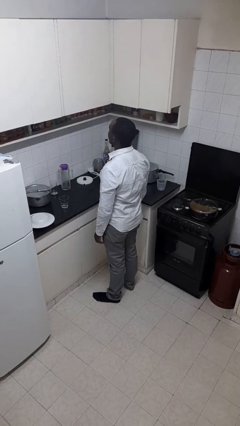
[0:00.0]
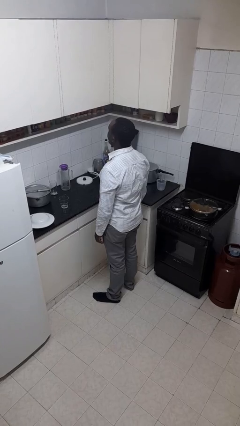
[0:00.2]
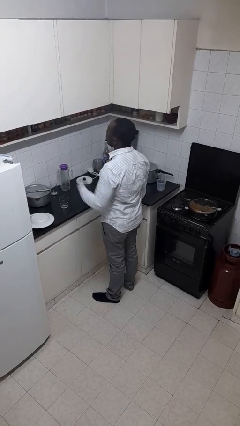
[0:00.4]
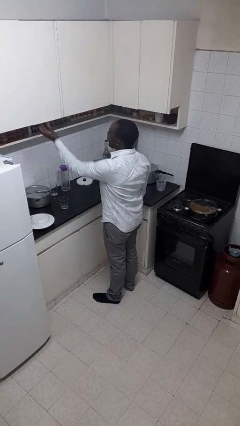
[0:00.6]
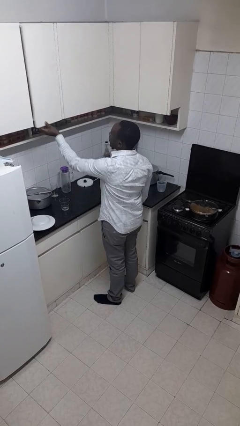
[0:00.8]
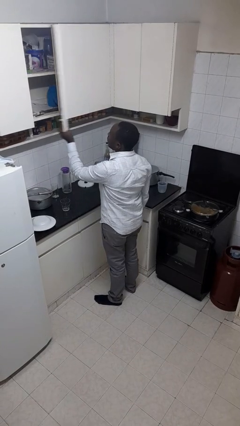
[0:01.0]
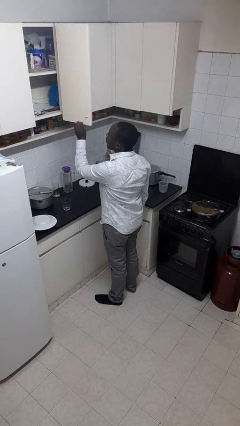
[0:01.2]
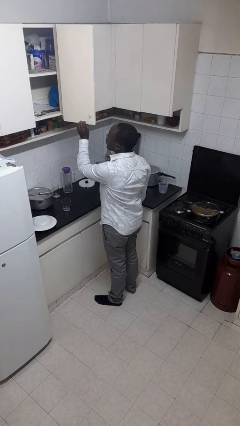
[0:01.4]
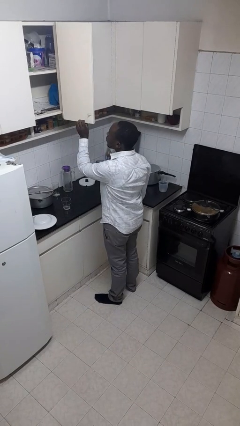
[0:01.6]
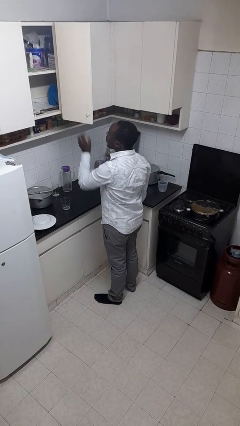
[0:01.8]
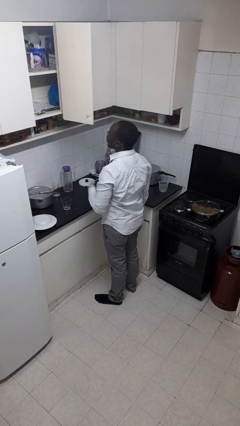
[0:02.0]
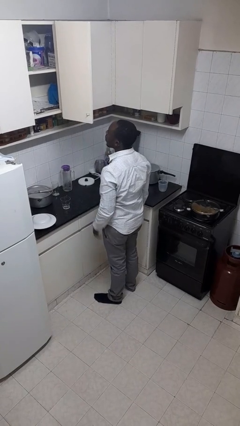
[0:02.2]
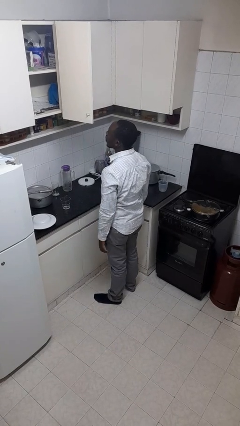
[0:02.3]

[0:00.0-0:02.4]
person opens cabinet

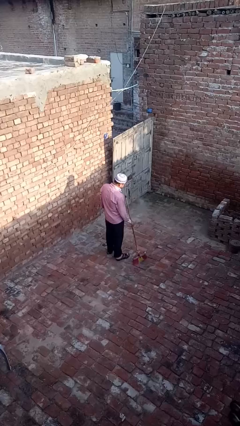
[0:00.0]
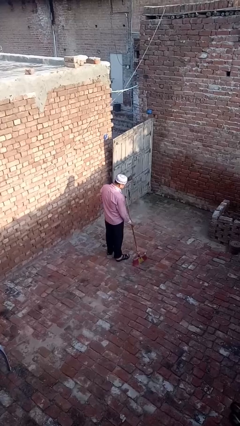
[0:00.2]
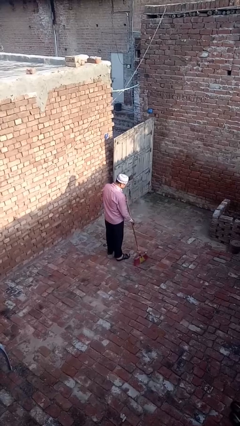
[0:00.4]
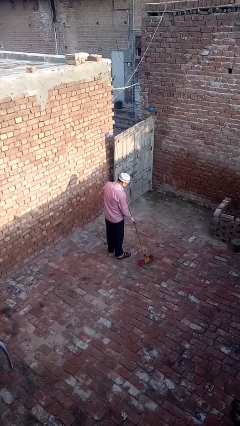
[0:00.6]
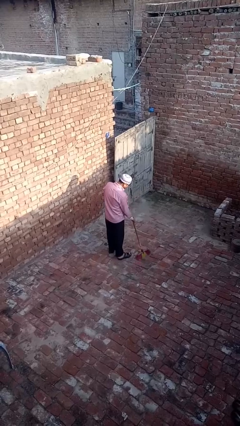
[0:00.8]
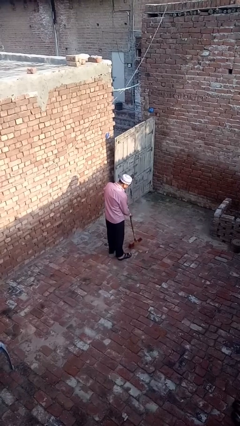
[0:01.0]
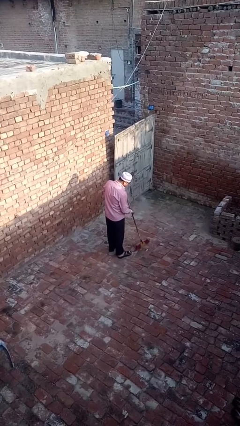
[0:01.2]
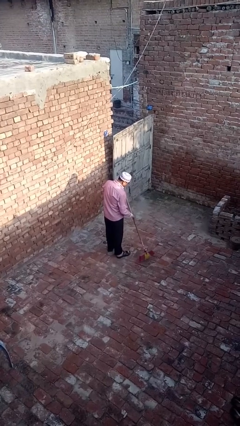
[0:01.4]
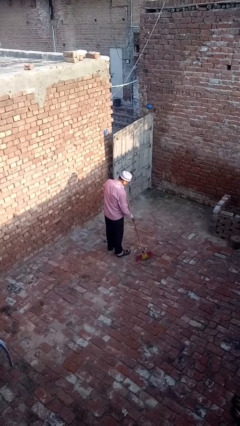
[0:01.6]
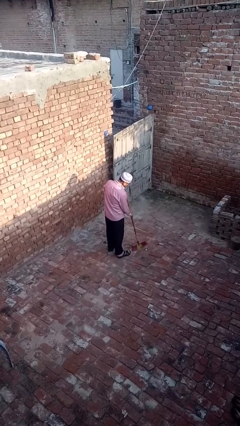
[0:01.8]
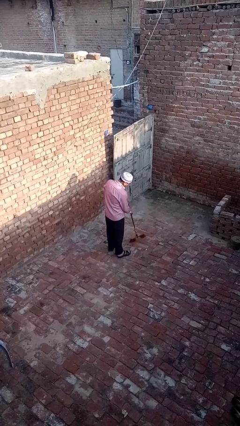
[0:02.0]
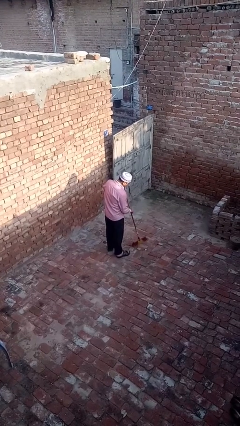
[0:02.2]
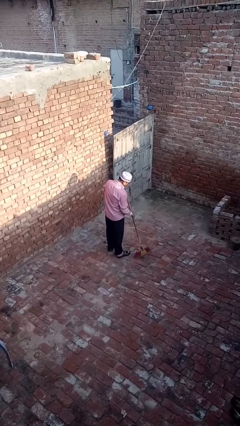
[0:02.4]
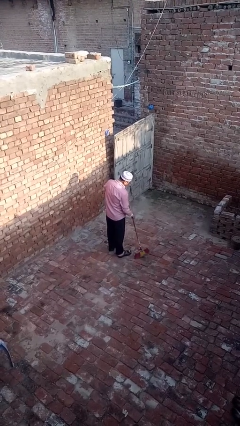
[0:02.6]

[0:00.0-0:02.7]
person sweeps floor

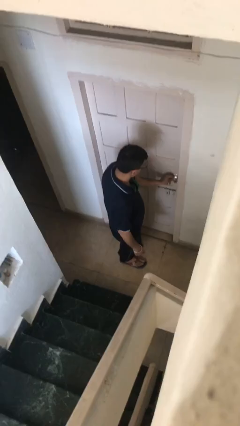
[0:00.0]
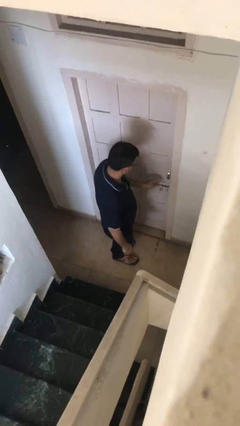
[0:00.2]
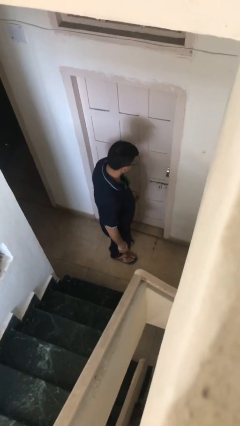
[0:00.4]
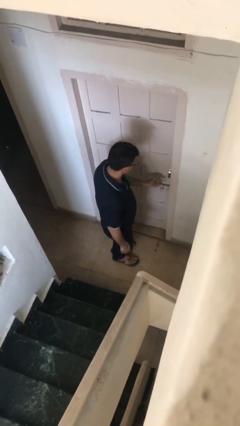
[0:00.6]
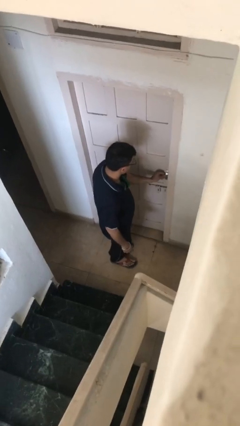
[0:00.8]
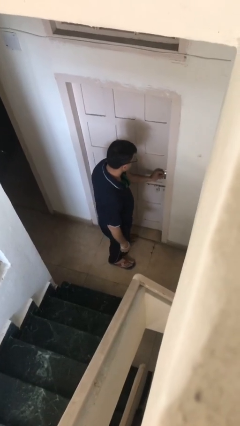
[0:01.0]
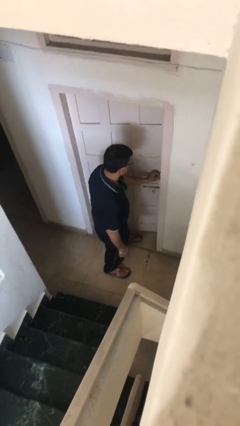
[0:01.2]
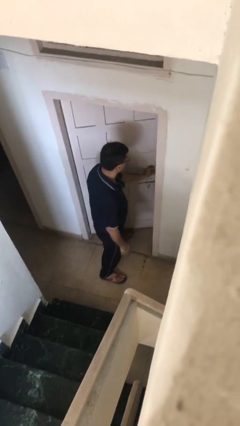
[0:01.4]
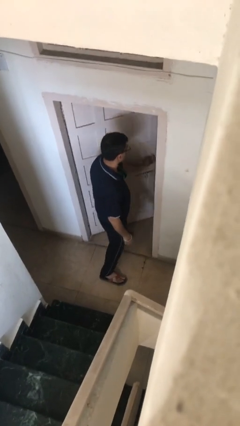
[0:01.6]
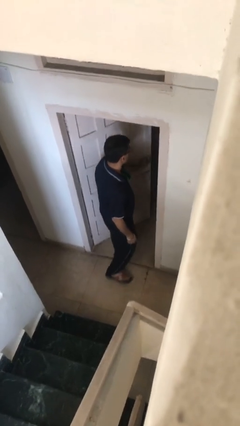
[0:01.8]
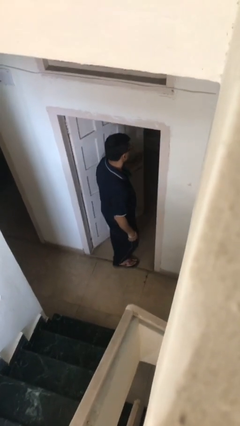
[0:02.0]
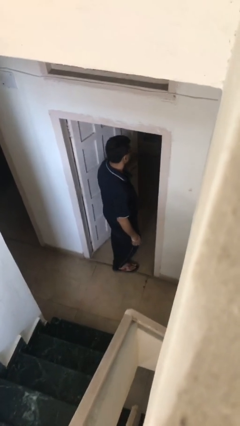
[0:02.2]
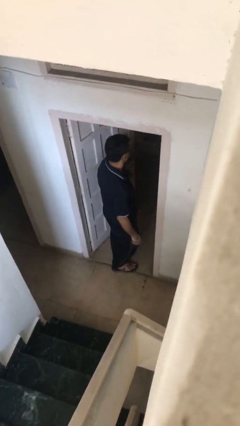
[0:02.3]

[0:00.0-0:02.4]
person opens facility door

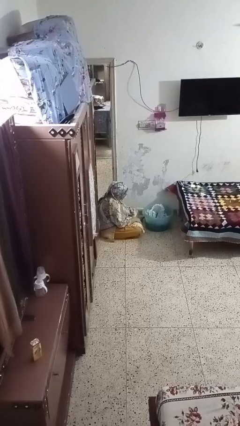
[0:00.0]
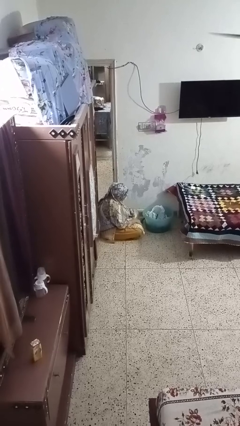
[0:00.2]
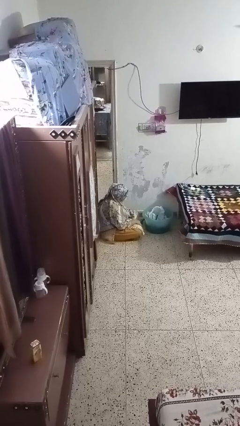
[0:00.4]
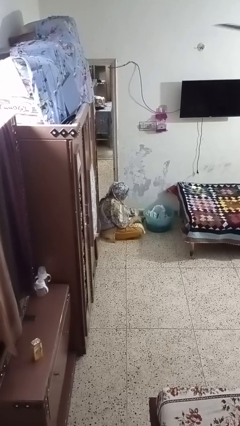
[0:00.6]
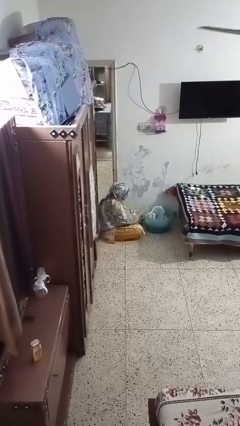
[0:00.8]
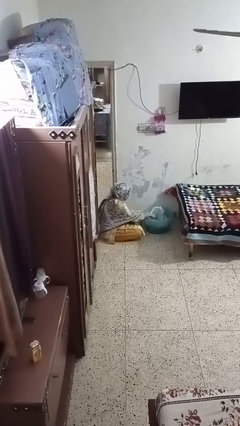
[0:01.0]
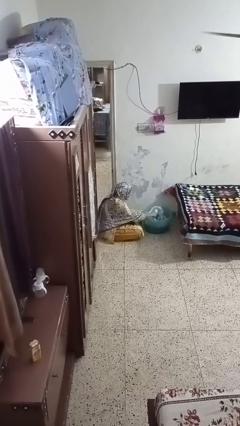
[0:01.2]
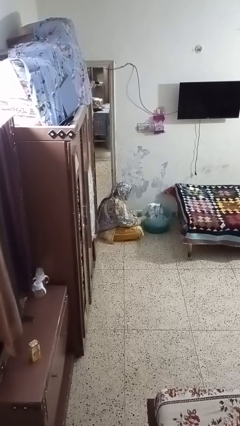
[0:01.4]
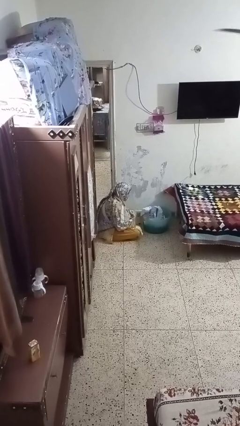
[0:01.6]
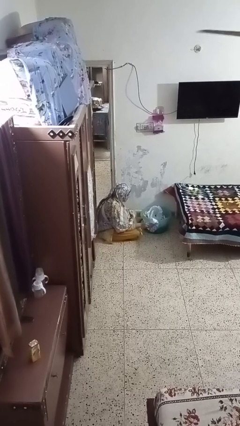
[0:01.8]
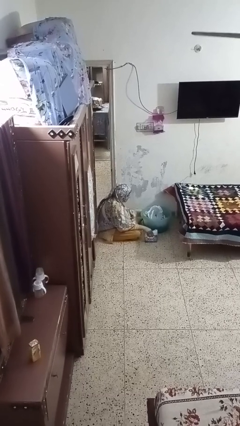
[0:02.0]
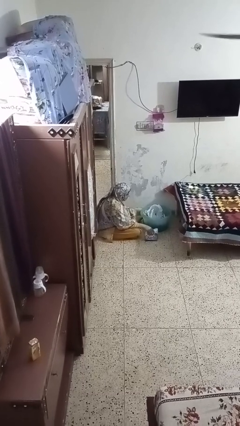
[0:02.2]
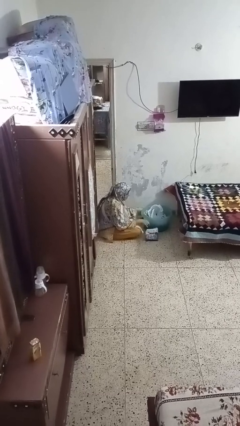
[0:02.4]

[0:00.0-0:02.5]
person takes object from basket

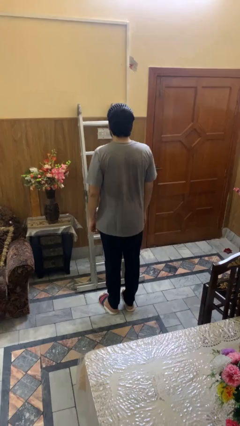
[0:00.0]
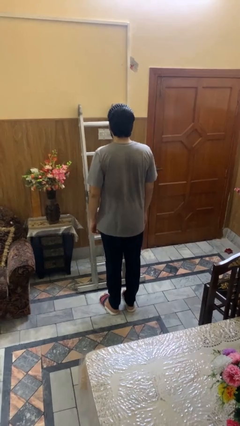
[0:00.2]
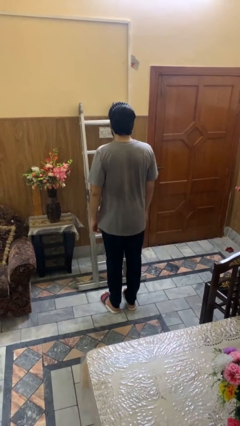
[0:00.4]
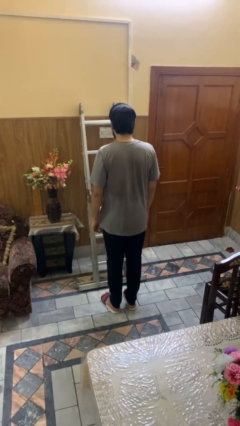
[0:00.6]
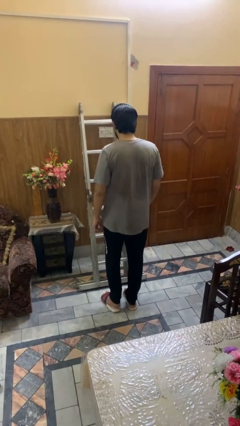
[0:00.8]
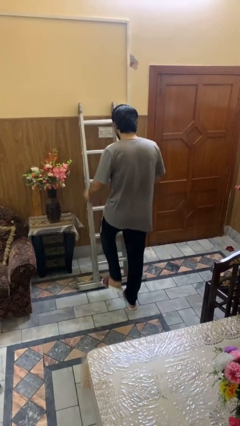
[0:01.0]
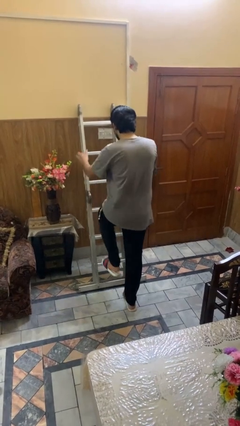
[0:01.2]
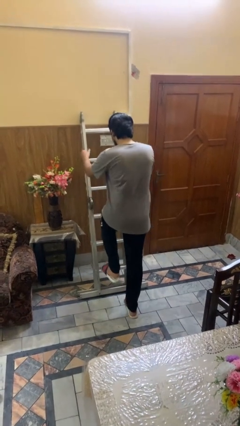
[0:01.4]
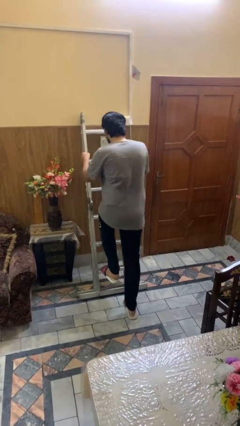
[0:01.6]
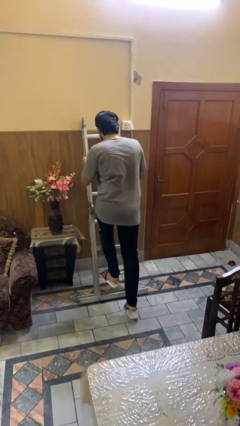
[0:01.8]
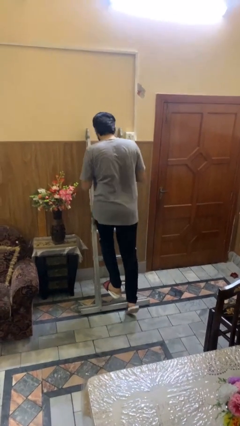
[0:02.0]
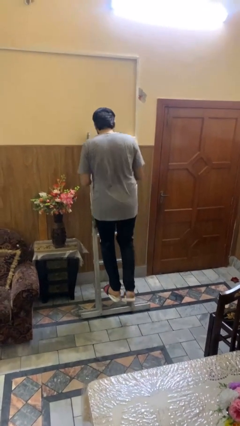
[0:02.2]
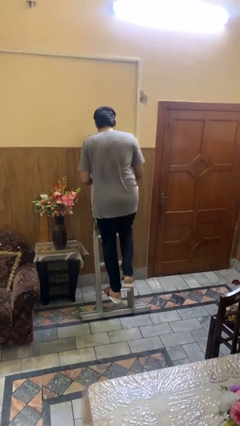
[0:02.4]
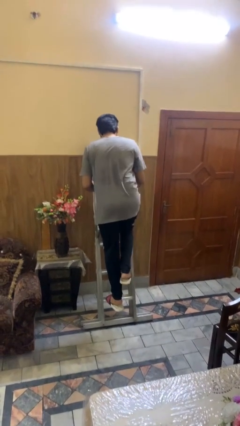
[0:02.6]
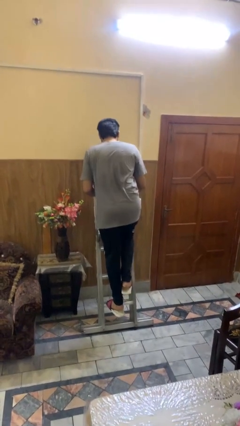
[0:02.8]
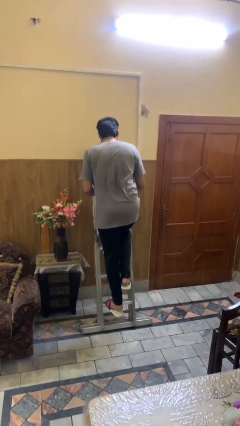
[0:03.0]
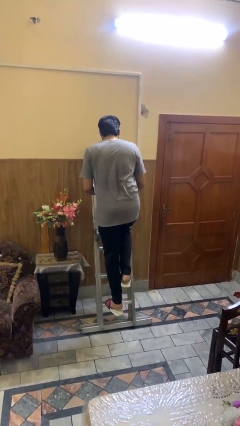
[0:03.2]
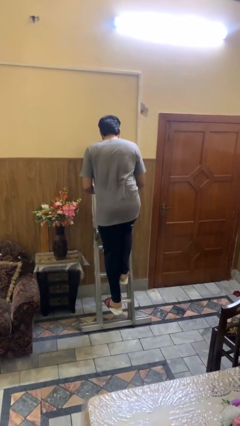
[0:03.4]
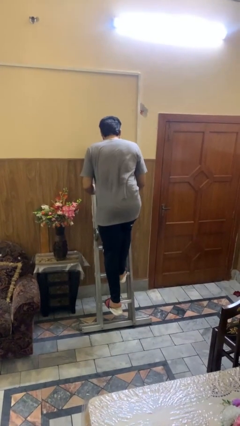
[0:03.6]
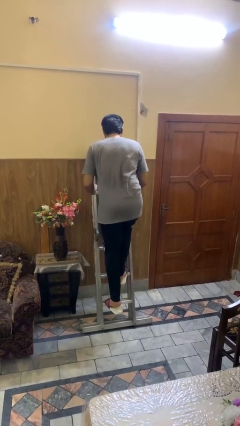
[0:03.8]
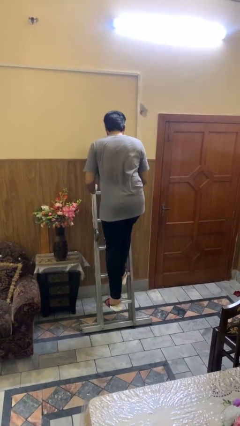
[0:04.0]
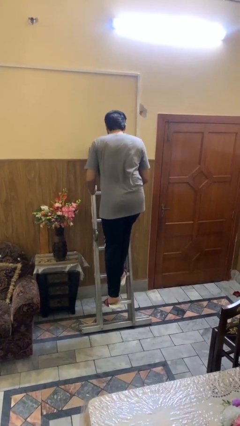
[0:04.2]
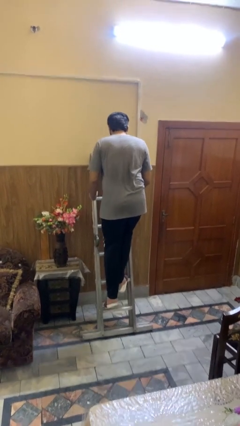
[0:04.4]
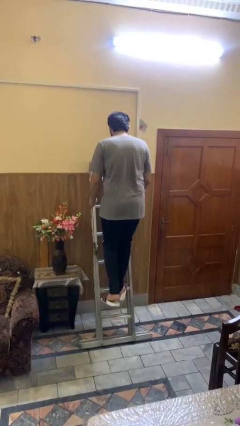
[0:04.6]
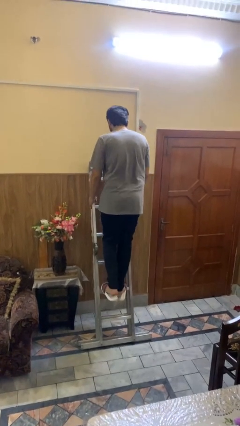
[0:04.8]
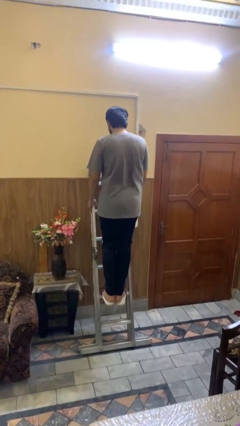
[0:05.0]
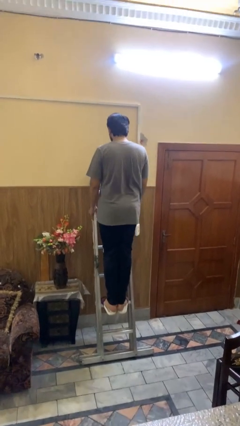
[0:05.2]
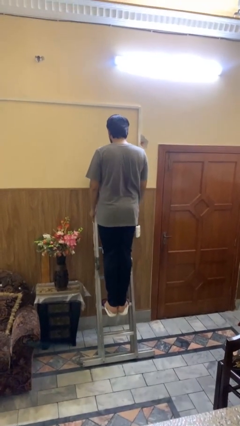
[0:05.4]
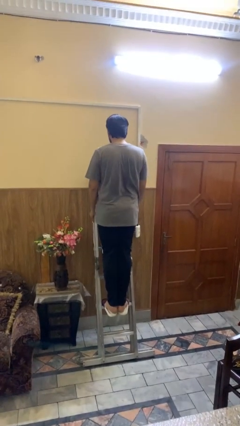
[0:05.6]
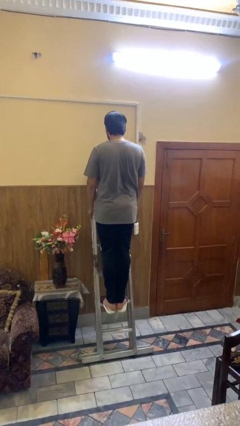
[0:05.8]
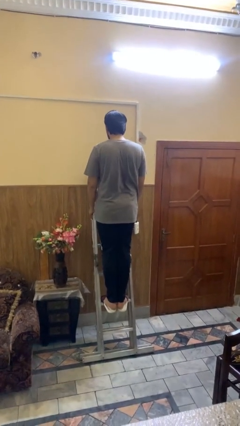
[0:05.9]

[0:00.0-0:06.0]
person climbs up ladder

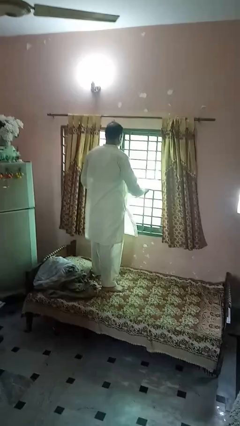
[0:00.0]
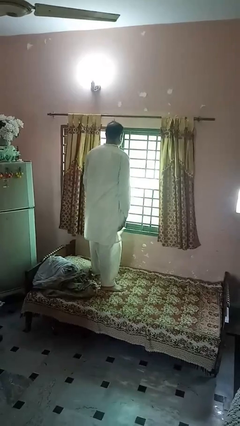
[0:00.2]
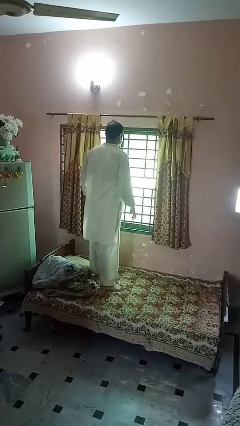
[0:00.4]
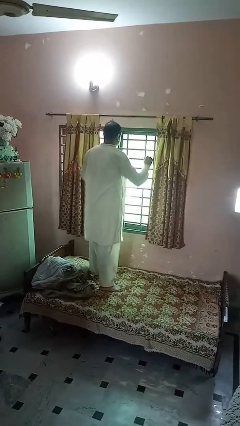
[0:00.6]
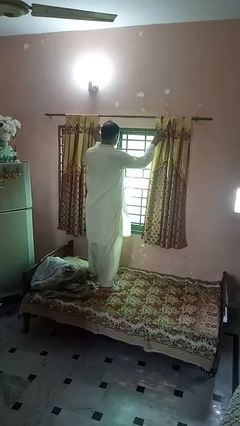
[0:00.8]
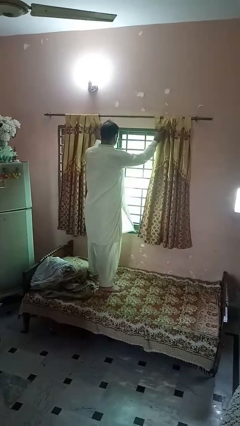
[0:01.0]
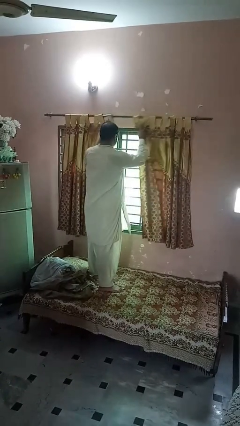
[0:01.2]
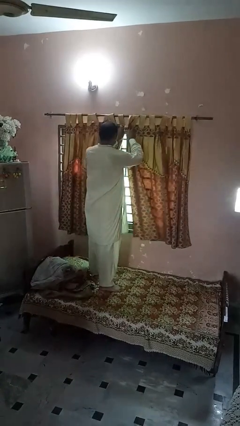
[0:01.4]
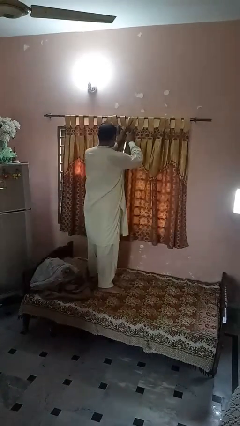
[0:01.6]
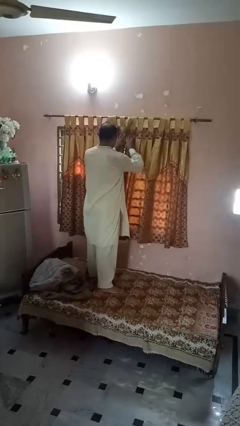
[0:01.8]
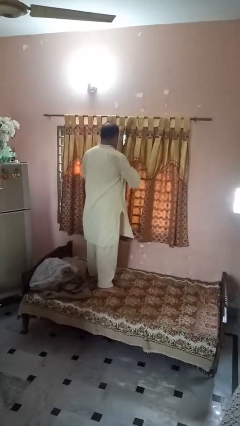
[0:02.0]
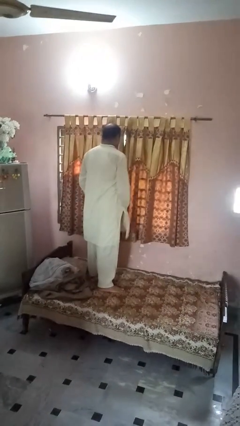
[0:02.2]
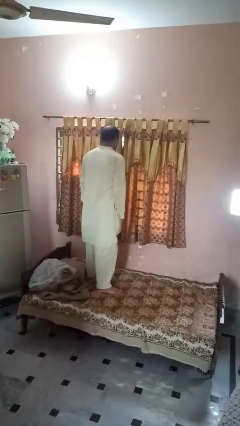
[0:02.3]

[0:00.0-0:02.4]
person closes curtains
